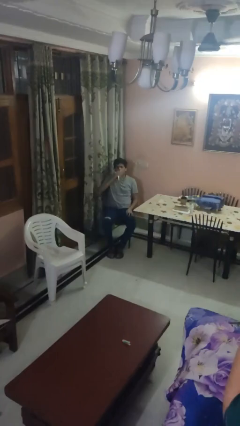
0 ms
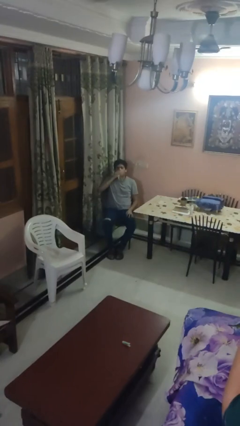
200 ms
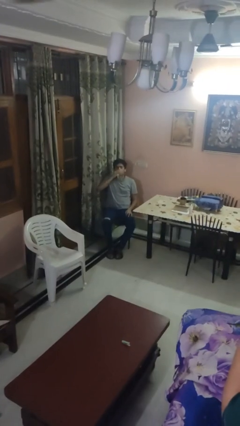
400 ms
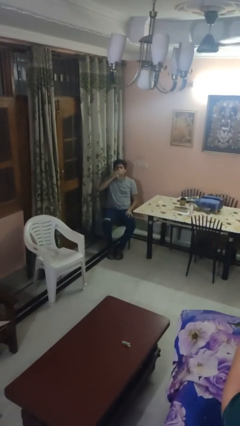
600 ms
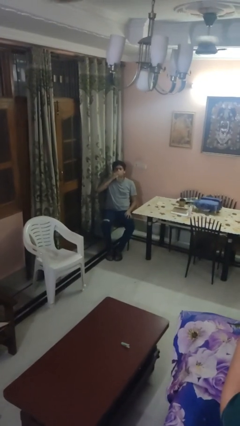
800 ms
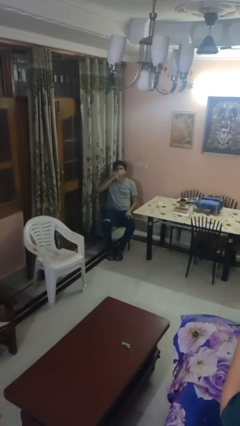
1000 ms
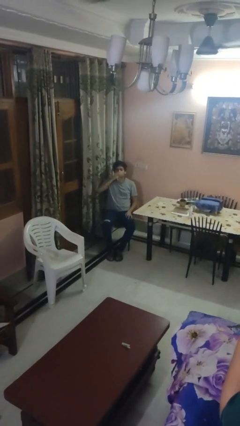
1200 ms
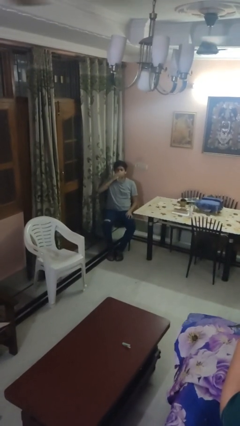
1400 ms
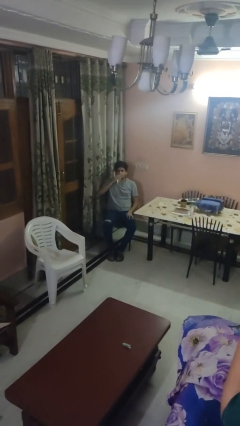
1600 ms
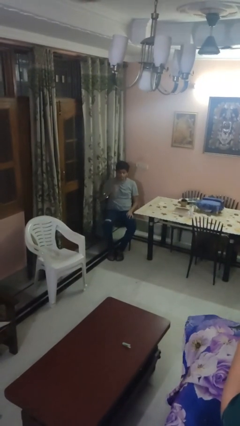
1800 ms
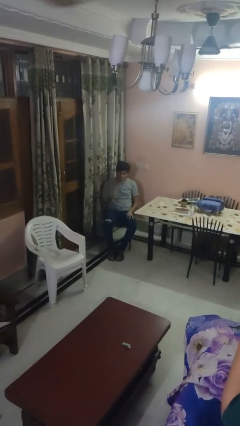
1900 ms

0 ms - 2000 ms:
person drinks from bottle

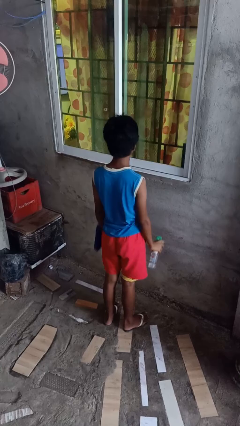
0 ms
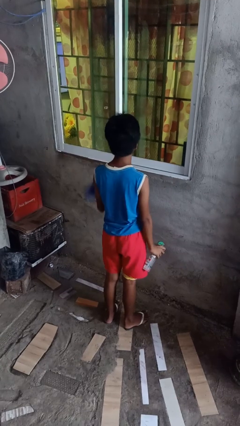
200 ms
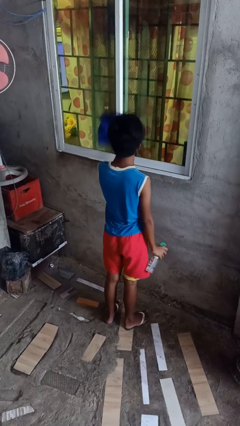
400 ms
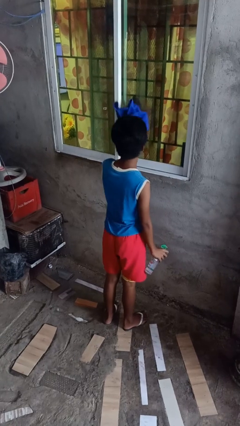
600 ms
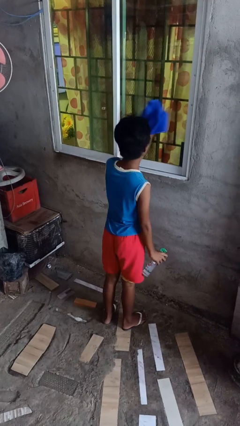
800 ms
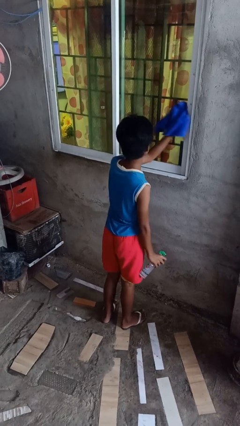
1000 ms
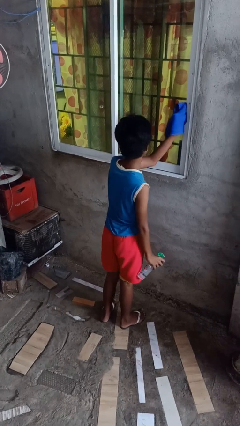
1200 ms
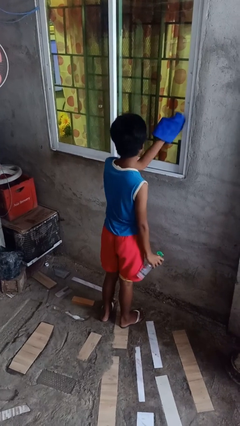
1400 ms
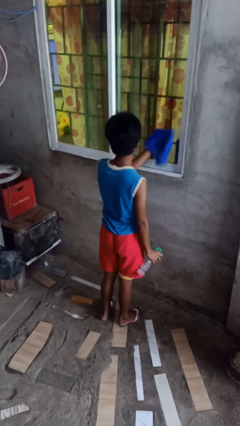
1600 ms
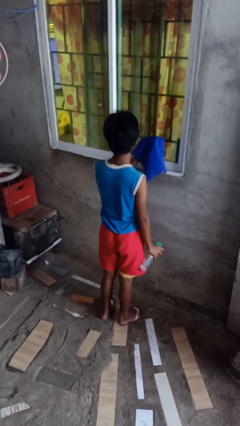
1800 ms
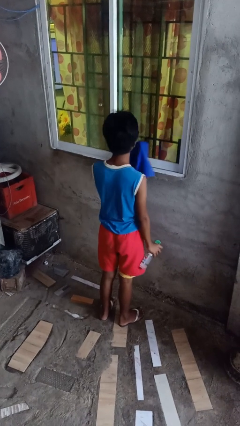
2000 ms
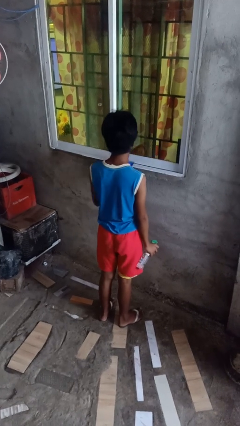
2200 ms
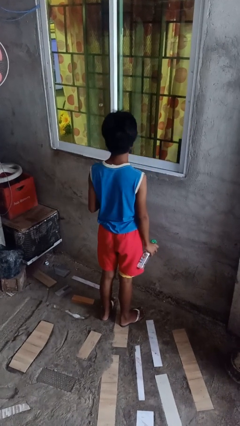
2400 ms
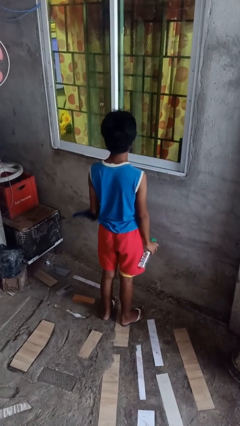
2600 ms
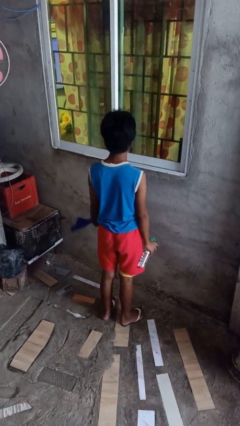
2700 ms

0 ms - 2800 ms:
person washes window

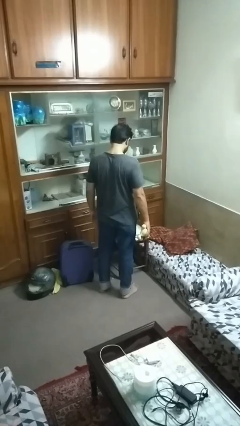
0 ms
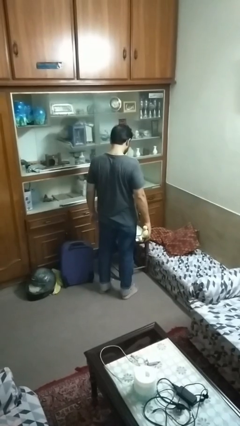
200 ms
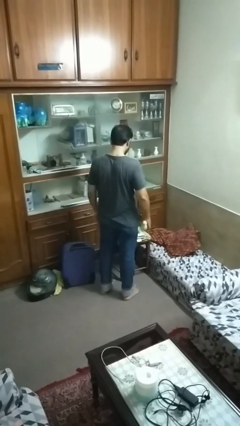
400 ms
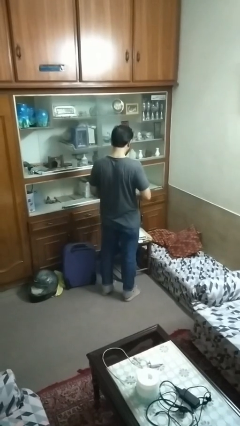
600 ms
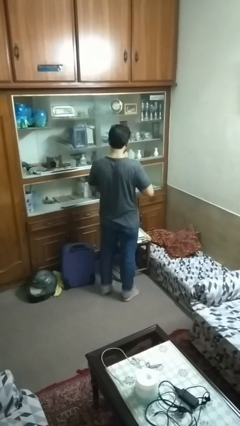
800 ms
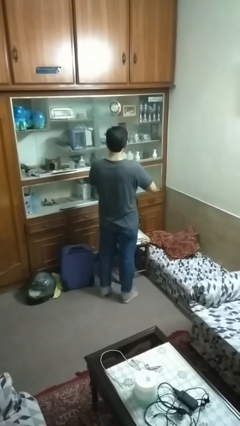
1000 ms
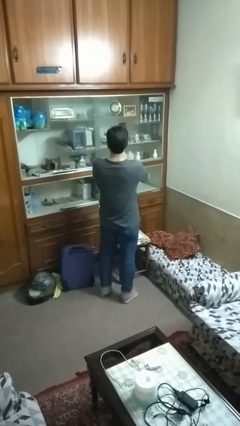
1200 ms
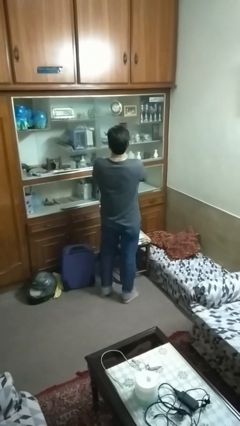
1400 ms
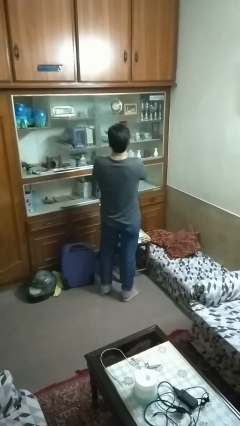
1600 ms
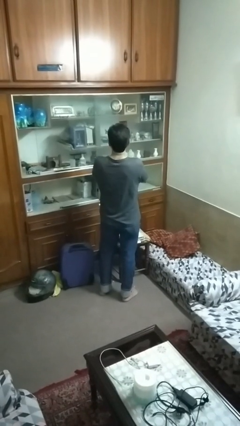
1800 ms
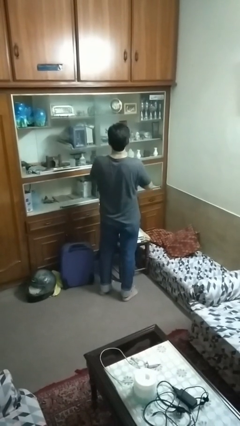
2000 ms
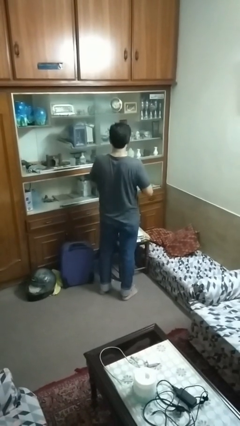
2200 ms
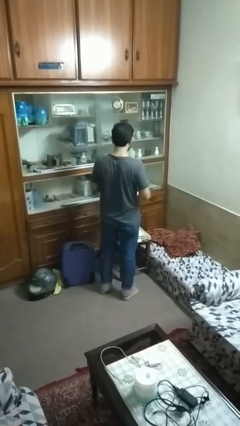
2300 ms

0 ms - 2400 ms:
person hugs stuffed animal

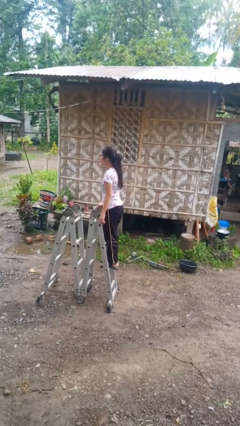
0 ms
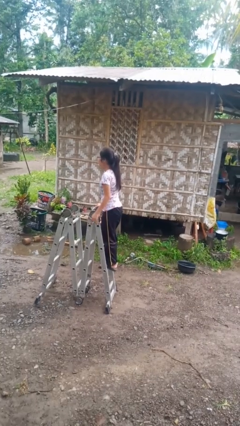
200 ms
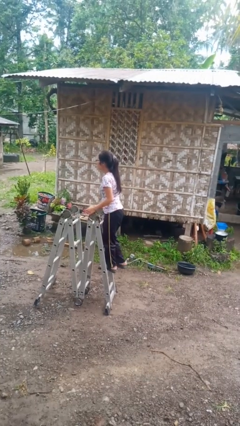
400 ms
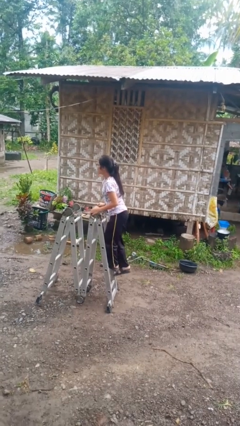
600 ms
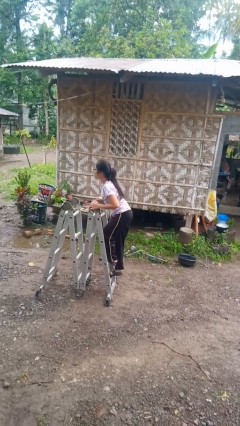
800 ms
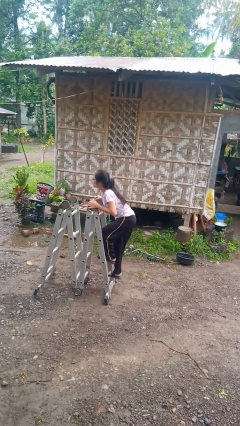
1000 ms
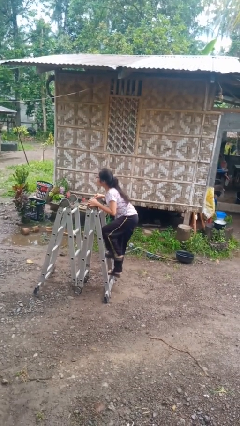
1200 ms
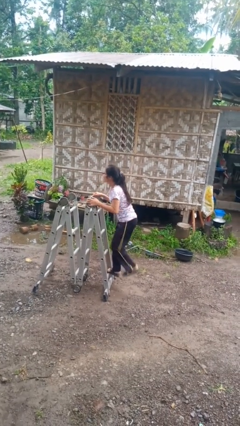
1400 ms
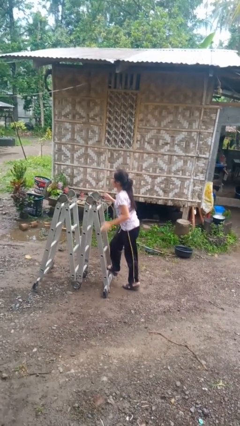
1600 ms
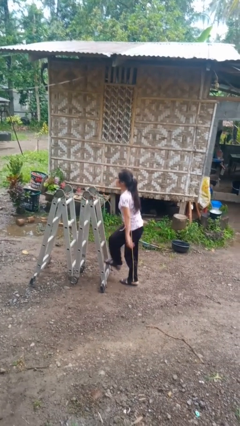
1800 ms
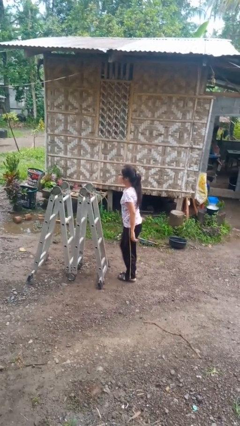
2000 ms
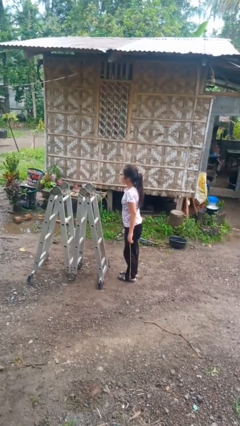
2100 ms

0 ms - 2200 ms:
person climbs down ladder

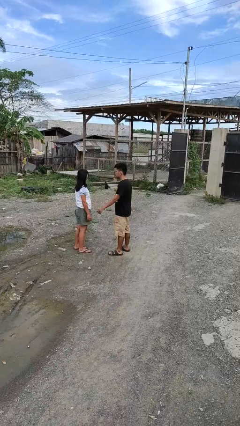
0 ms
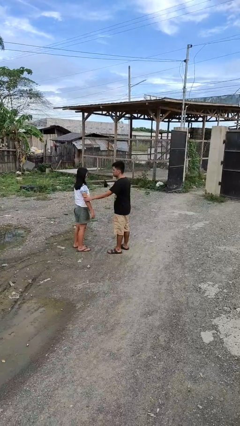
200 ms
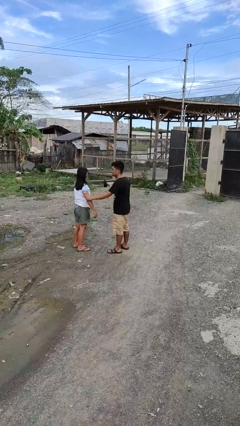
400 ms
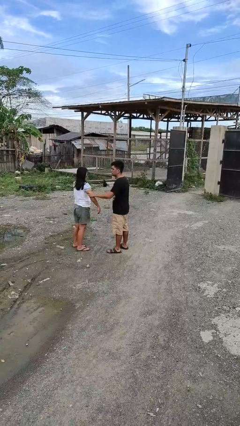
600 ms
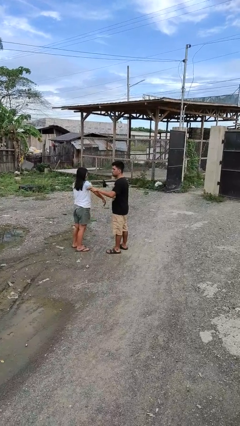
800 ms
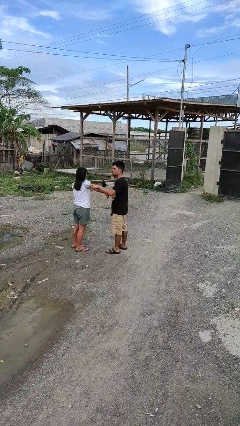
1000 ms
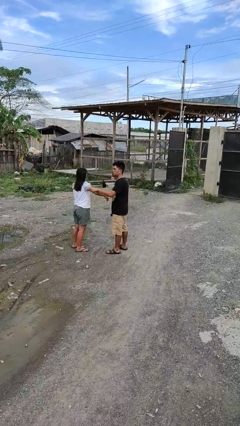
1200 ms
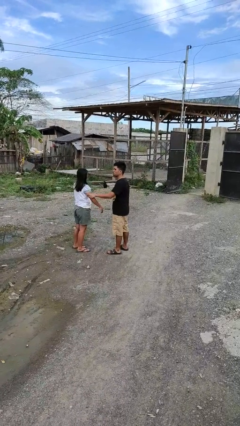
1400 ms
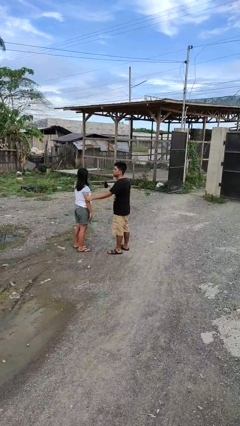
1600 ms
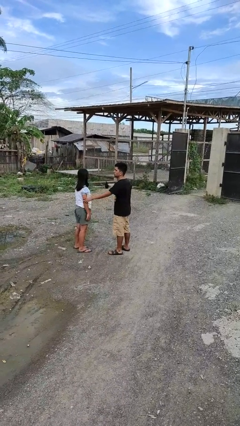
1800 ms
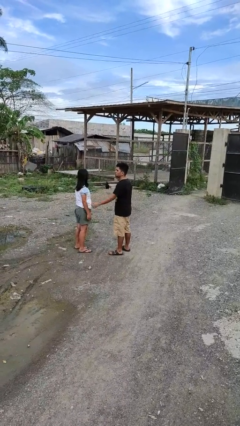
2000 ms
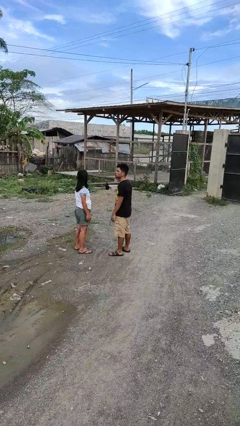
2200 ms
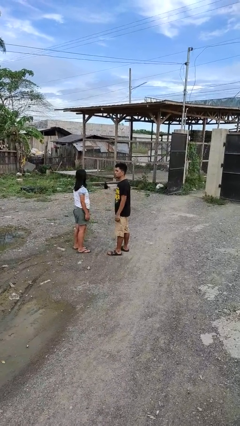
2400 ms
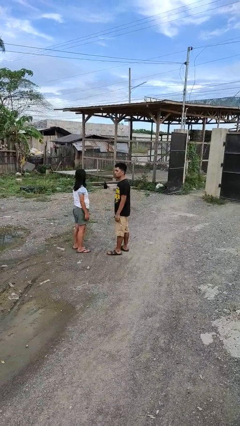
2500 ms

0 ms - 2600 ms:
person grabs person by bicep

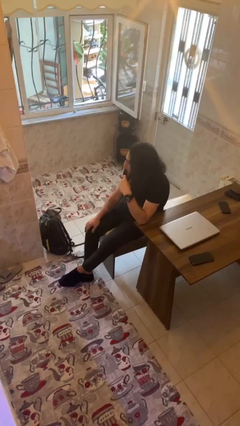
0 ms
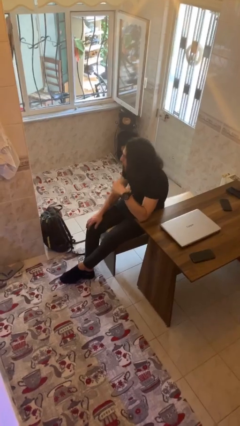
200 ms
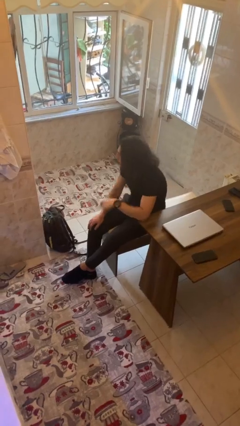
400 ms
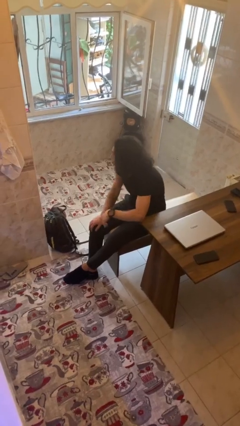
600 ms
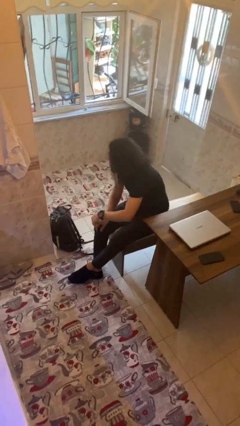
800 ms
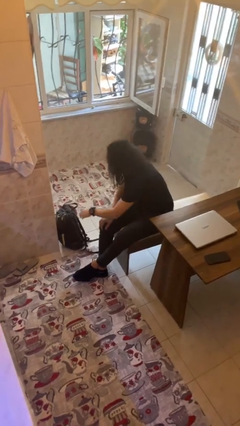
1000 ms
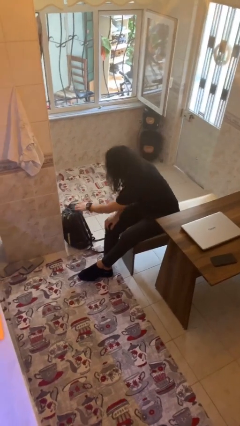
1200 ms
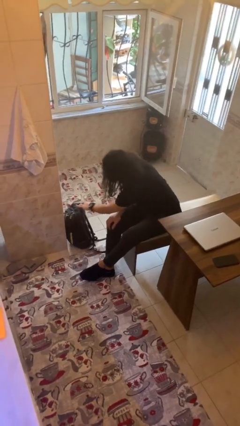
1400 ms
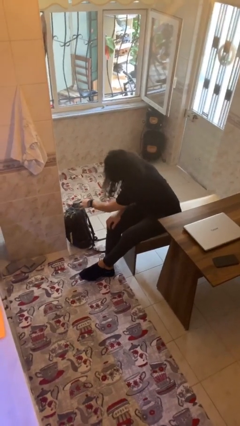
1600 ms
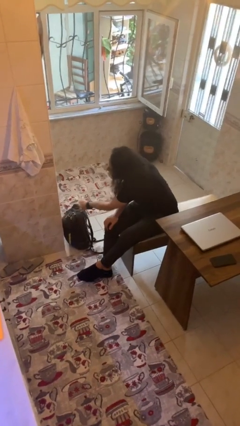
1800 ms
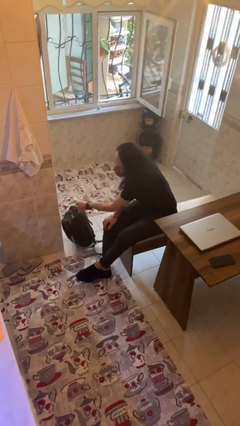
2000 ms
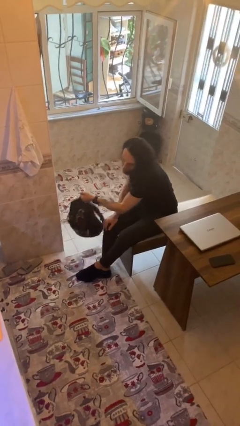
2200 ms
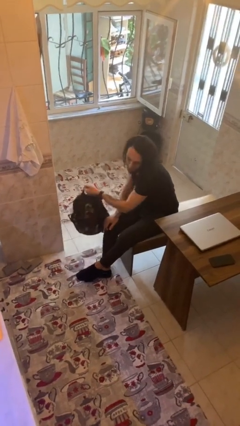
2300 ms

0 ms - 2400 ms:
person picks up object from floor

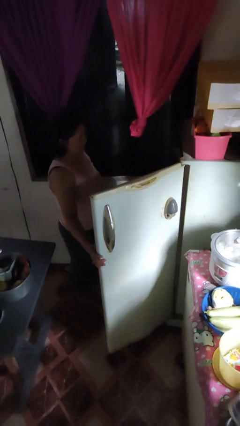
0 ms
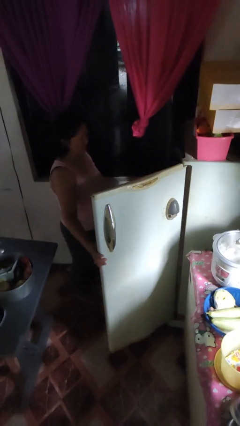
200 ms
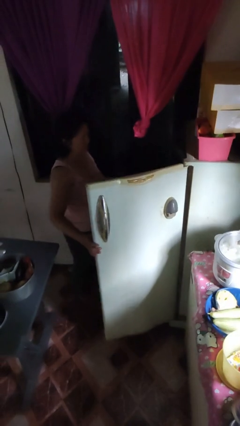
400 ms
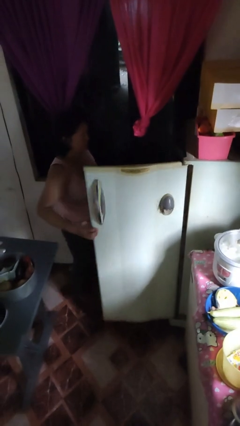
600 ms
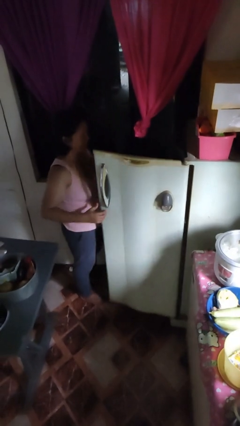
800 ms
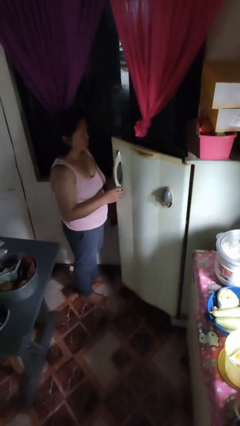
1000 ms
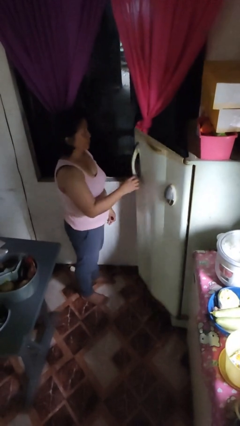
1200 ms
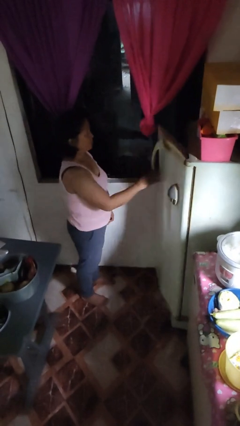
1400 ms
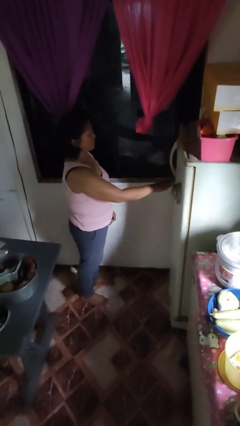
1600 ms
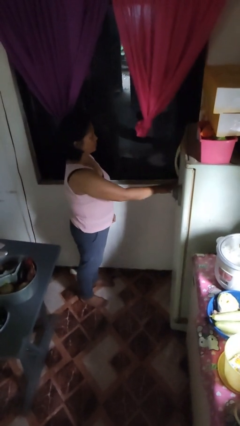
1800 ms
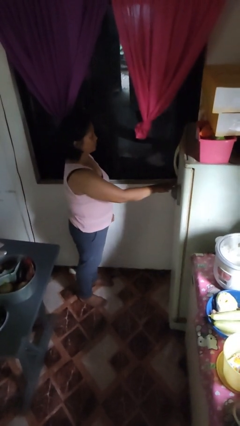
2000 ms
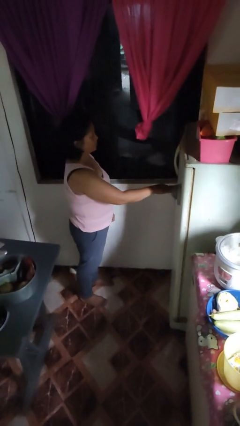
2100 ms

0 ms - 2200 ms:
person closes refrigerator

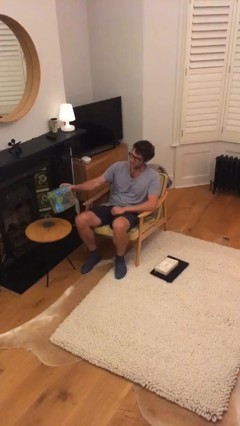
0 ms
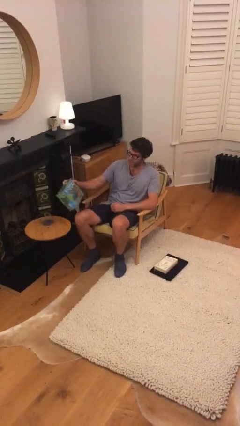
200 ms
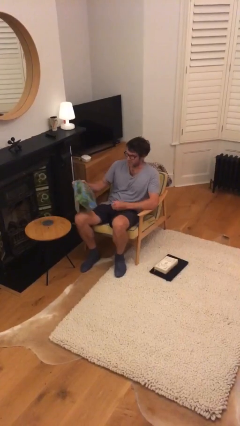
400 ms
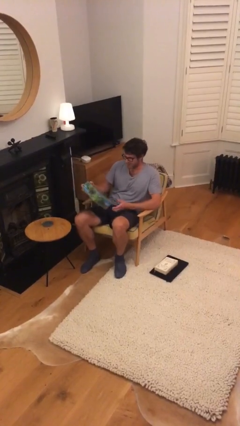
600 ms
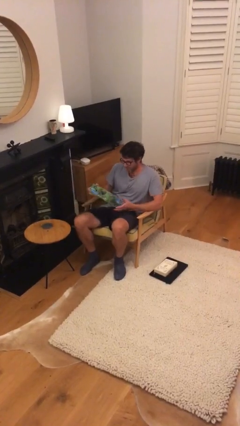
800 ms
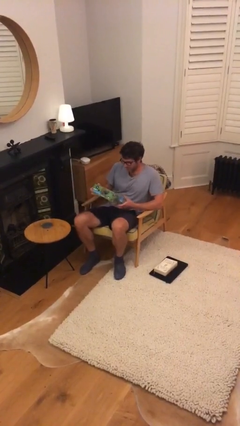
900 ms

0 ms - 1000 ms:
person picks up object from table
